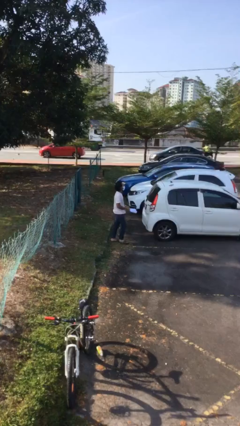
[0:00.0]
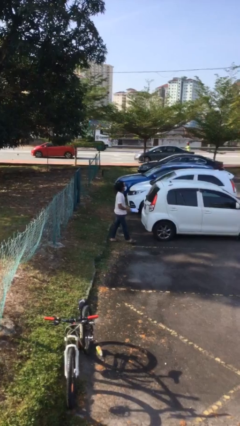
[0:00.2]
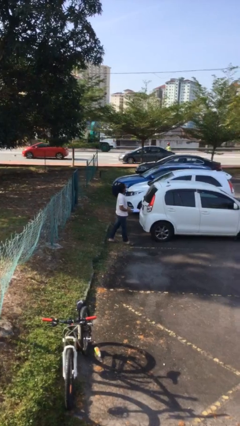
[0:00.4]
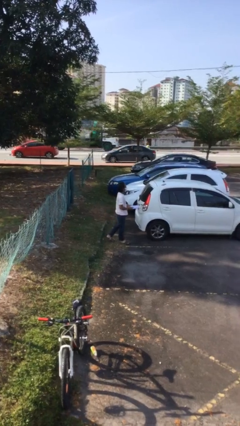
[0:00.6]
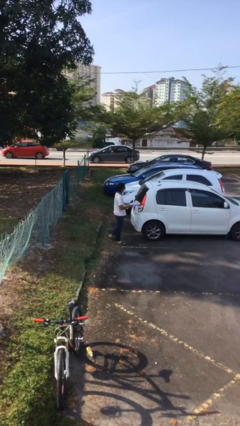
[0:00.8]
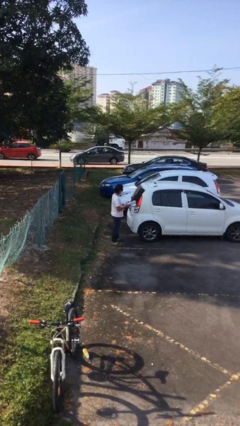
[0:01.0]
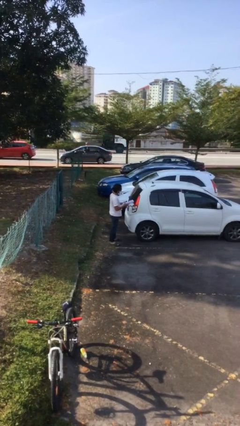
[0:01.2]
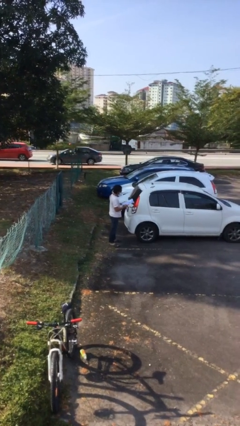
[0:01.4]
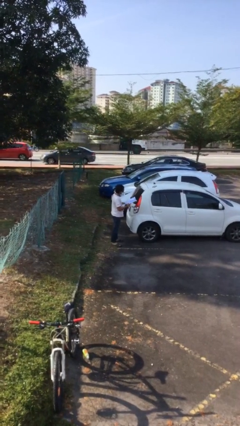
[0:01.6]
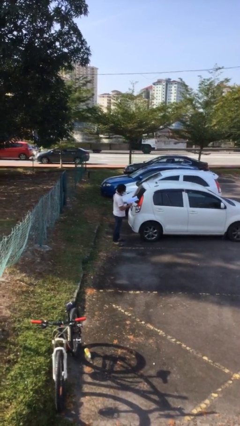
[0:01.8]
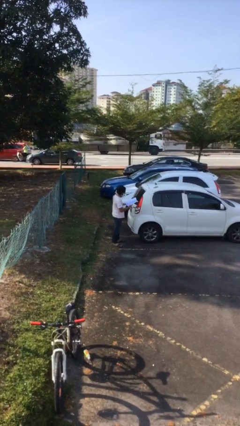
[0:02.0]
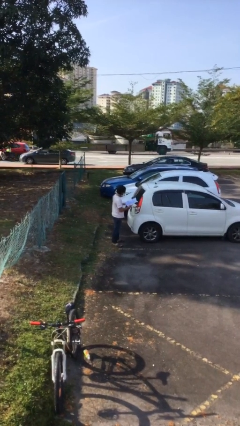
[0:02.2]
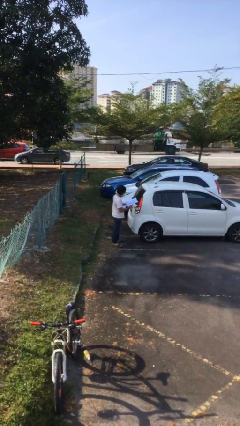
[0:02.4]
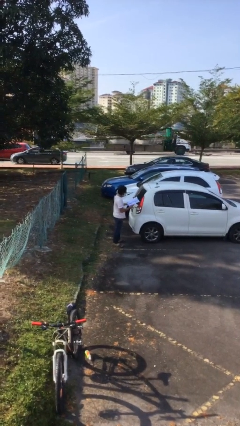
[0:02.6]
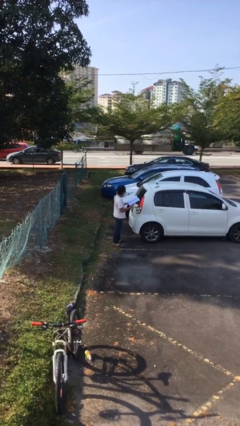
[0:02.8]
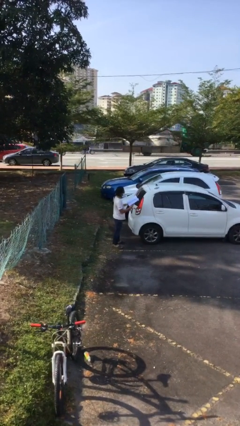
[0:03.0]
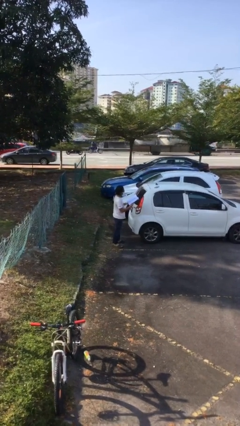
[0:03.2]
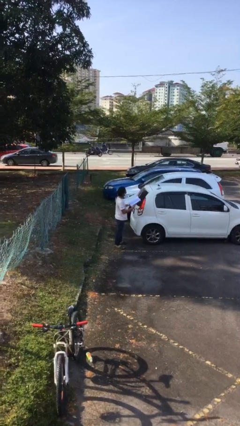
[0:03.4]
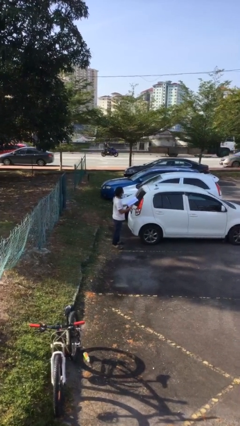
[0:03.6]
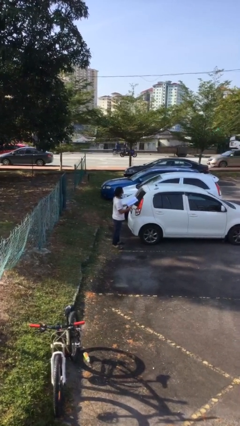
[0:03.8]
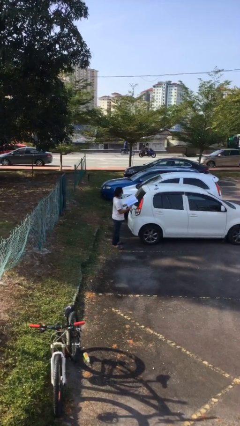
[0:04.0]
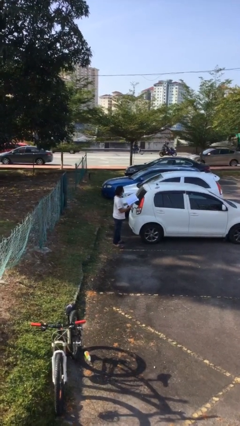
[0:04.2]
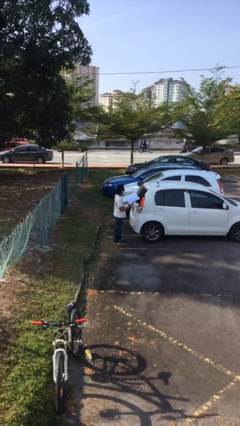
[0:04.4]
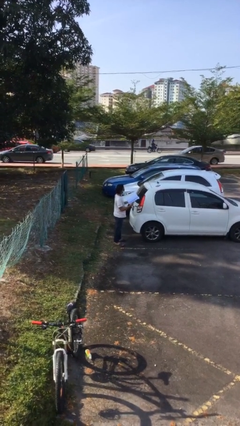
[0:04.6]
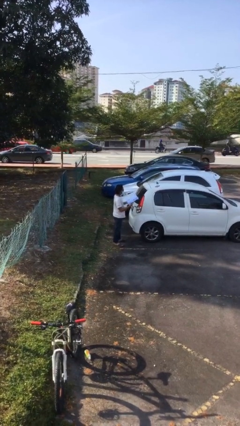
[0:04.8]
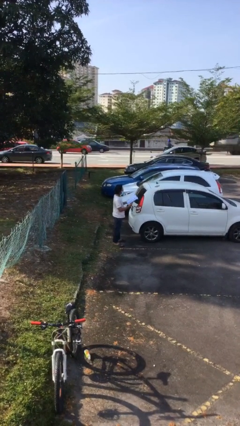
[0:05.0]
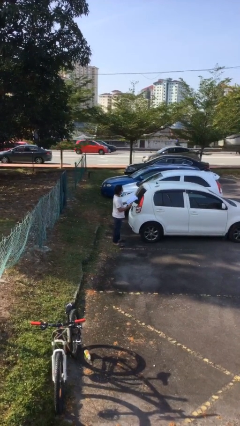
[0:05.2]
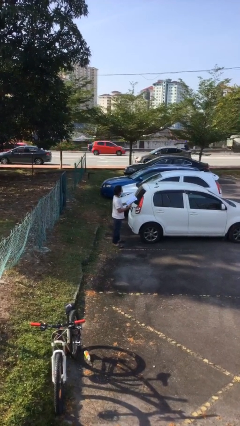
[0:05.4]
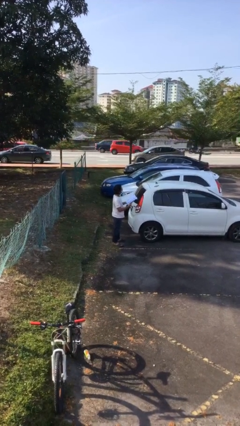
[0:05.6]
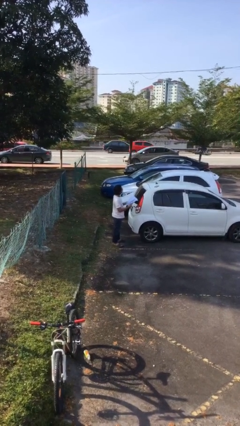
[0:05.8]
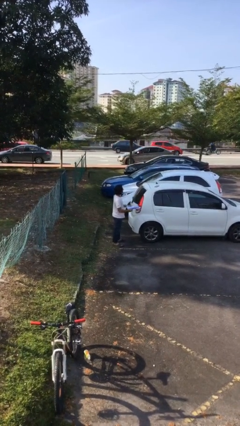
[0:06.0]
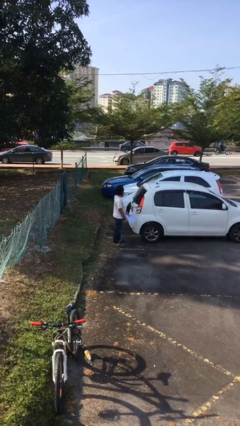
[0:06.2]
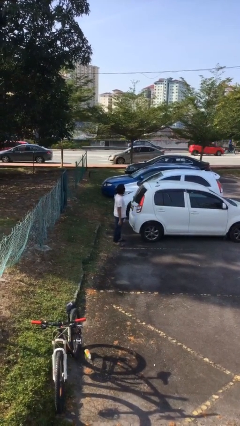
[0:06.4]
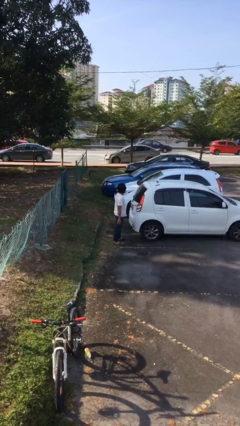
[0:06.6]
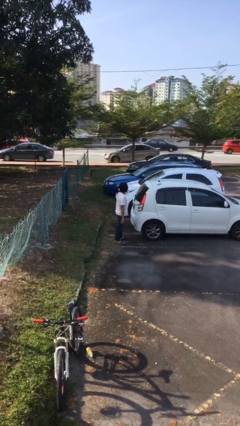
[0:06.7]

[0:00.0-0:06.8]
person reads document

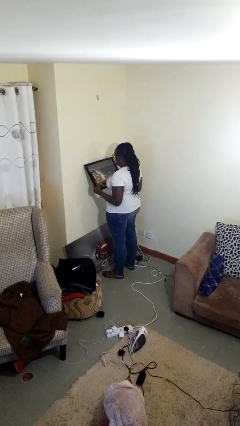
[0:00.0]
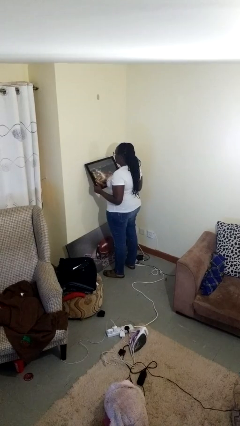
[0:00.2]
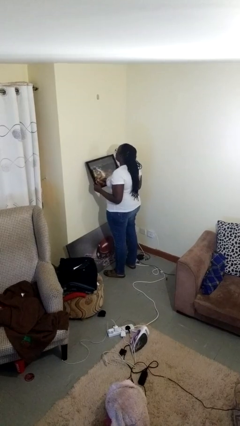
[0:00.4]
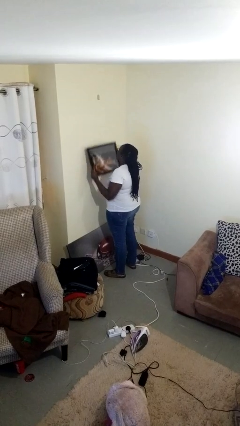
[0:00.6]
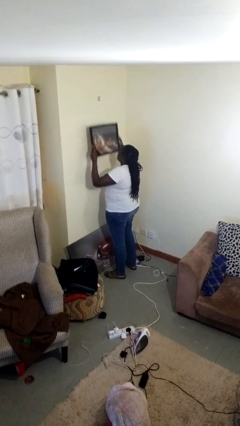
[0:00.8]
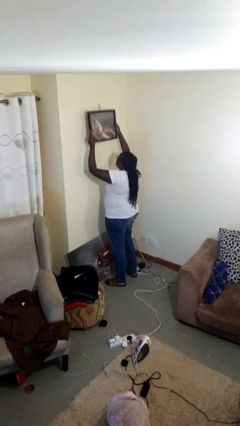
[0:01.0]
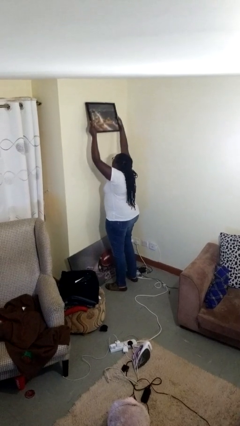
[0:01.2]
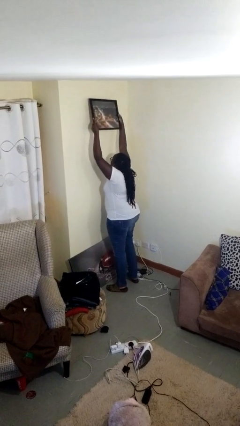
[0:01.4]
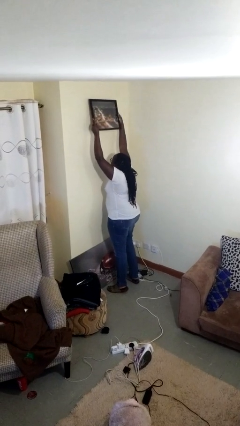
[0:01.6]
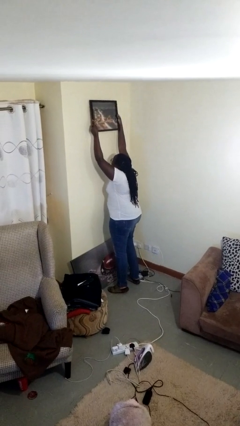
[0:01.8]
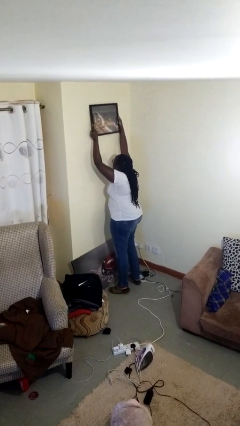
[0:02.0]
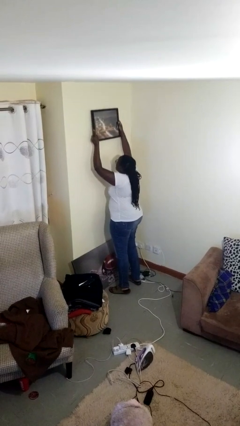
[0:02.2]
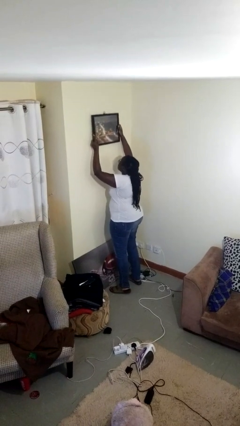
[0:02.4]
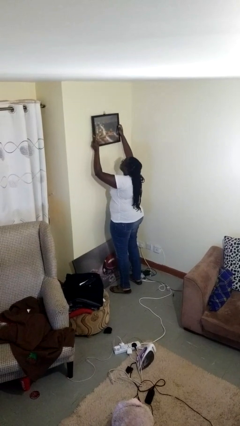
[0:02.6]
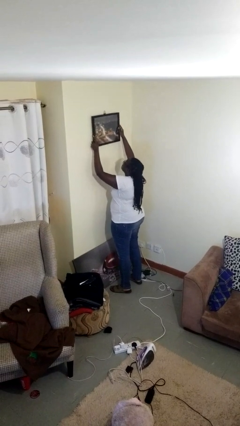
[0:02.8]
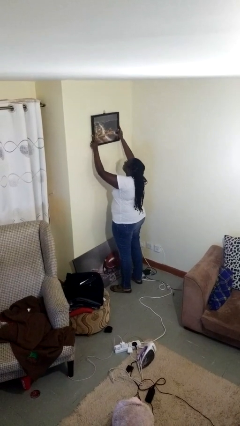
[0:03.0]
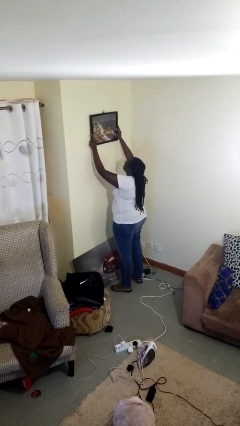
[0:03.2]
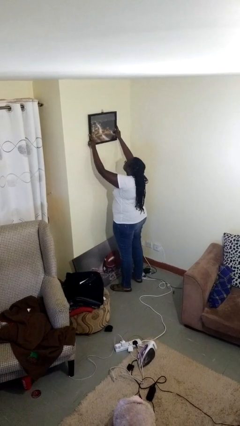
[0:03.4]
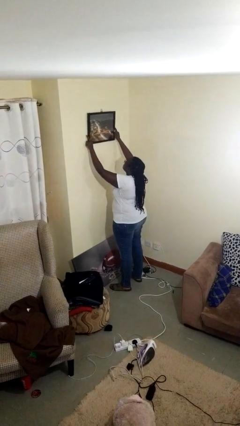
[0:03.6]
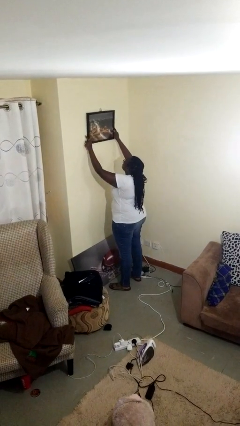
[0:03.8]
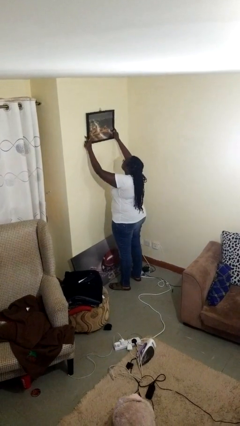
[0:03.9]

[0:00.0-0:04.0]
person puts up picture frame

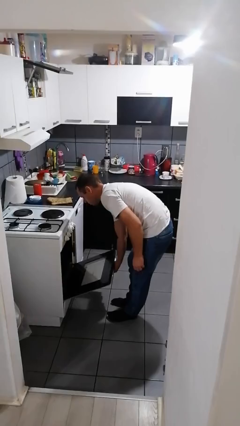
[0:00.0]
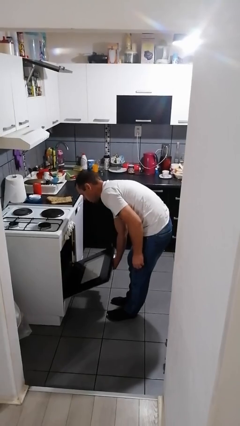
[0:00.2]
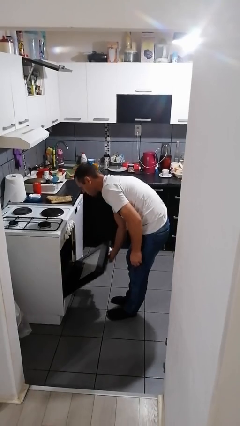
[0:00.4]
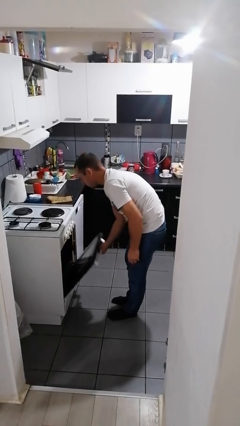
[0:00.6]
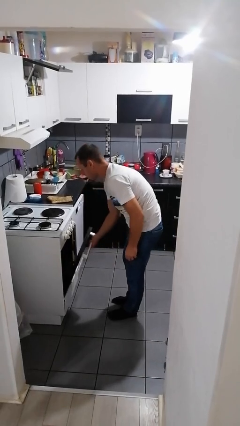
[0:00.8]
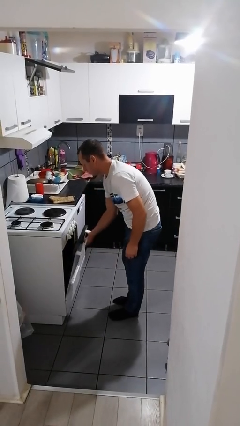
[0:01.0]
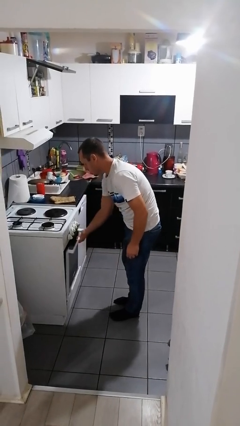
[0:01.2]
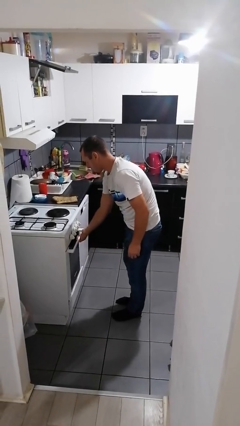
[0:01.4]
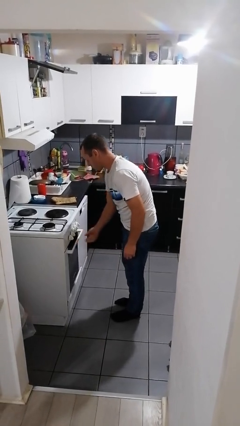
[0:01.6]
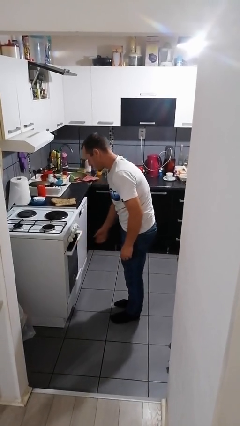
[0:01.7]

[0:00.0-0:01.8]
person closes oven door

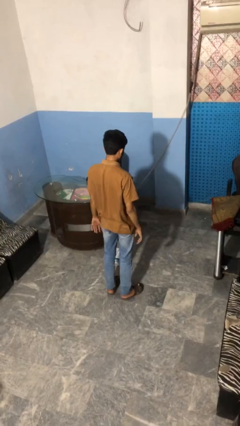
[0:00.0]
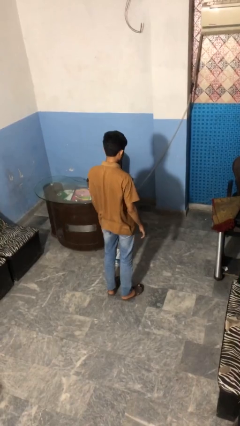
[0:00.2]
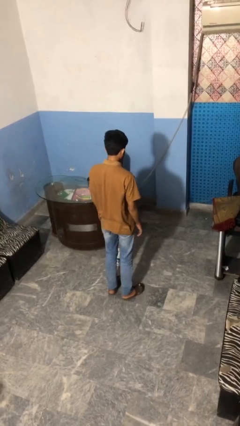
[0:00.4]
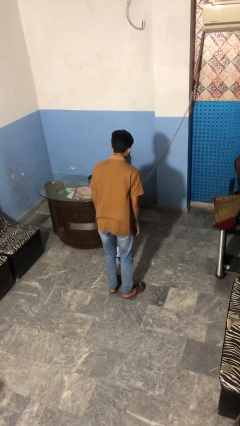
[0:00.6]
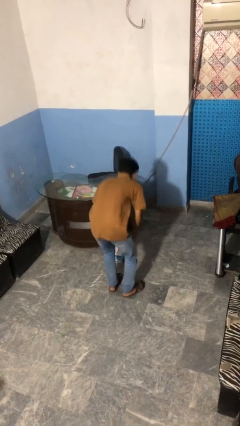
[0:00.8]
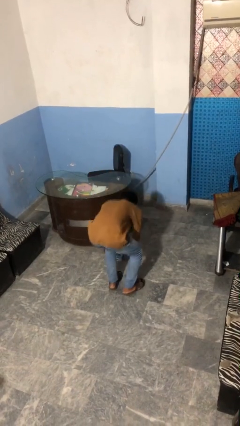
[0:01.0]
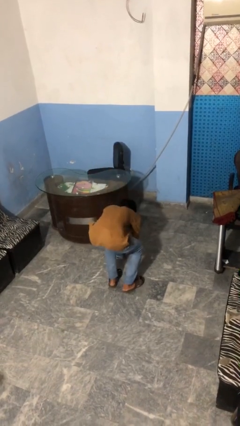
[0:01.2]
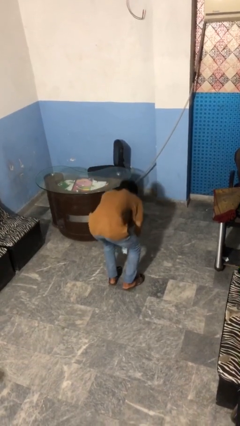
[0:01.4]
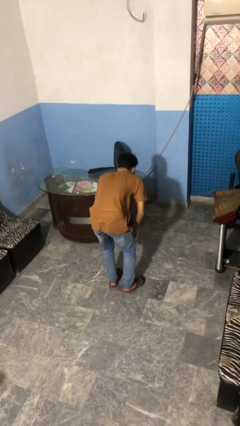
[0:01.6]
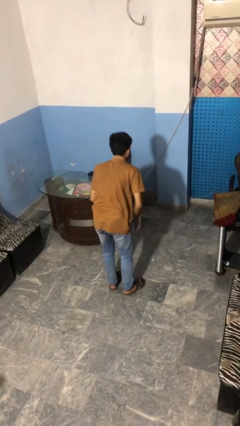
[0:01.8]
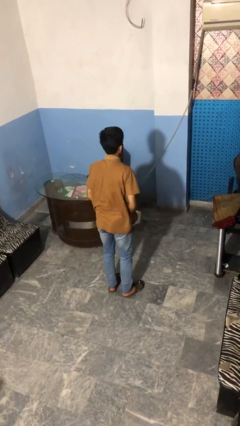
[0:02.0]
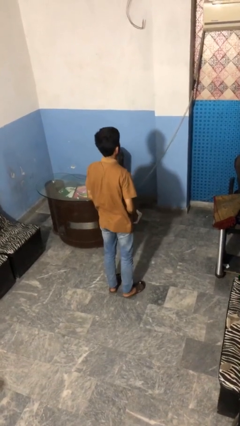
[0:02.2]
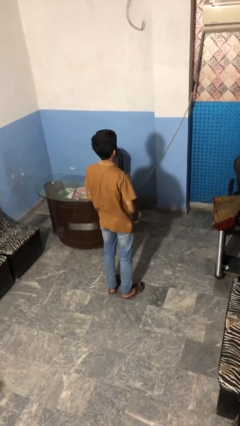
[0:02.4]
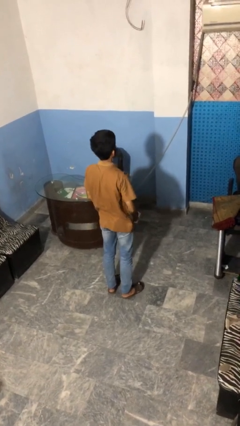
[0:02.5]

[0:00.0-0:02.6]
person picks up object from floor

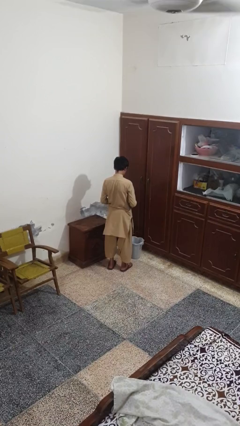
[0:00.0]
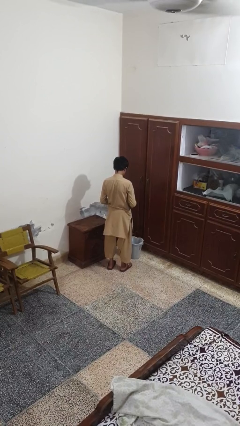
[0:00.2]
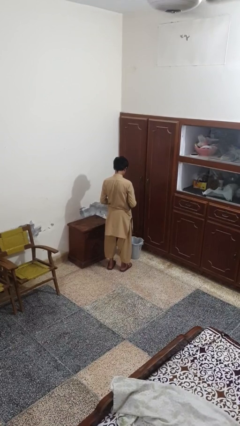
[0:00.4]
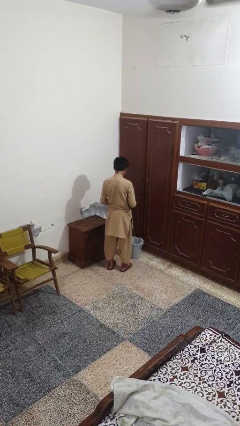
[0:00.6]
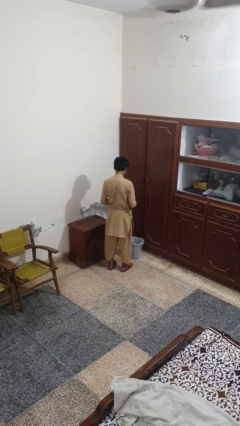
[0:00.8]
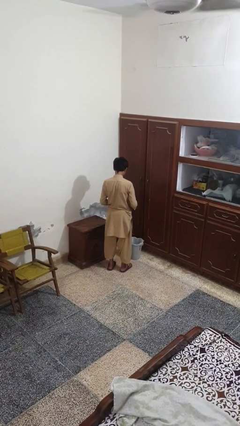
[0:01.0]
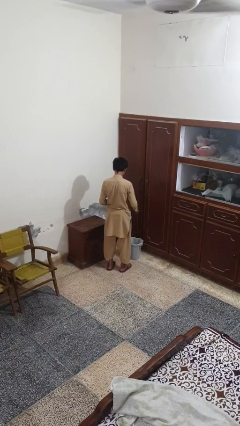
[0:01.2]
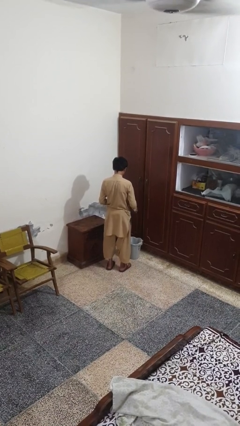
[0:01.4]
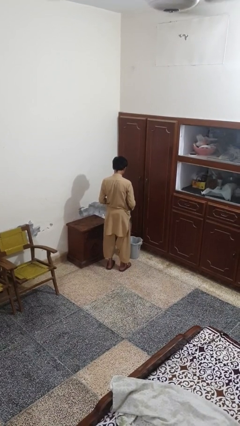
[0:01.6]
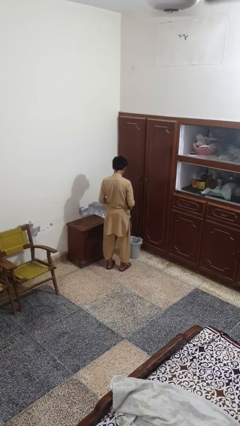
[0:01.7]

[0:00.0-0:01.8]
person discards trash

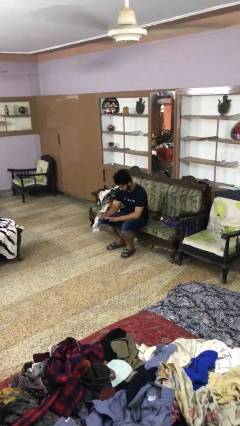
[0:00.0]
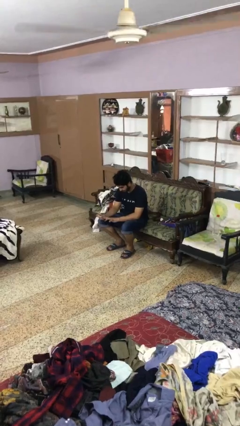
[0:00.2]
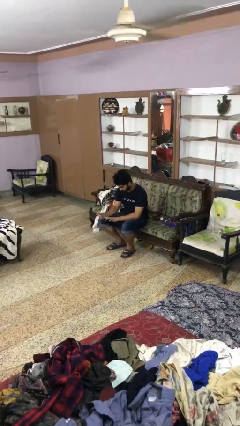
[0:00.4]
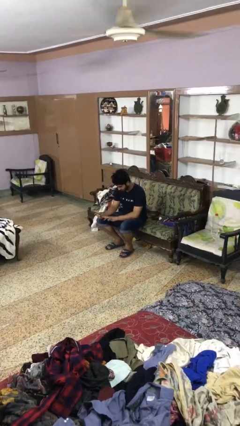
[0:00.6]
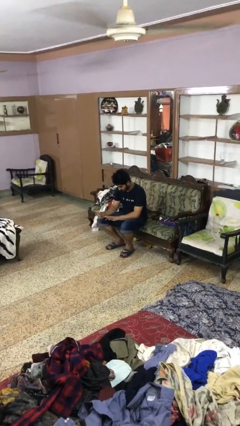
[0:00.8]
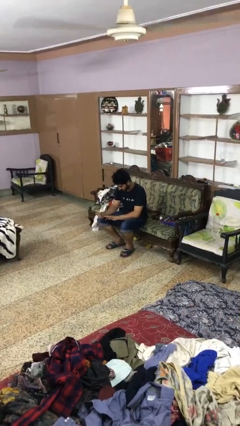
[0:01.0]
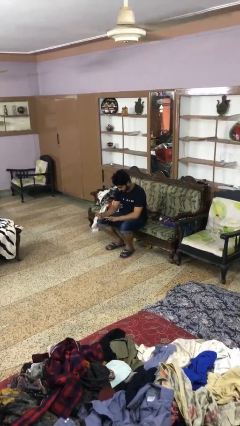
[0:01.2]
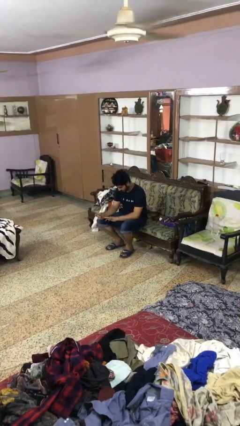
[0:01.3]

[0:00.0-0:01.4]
person clips fingernails
